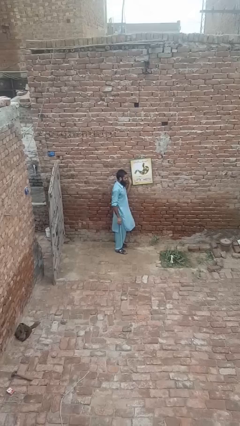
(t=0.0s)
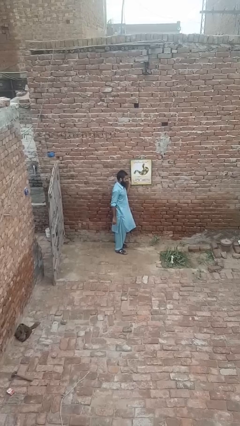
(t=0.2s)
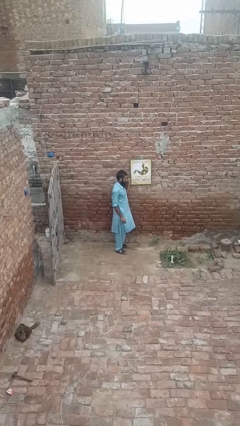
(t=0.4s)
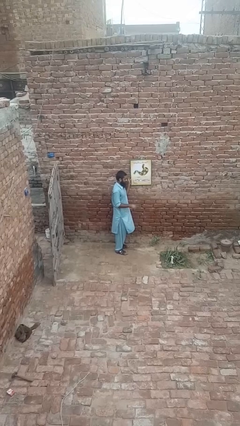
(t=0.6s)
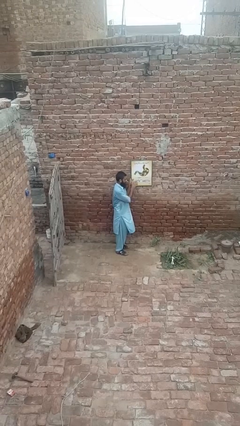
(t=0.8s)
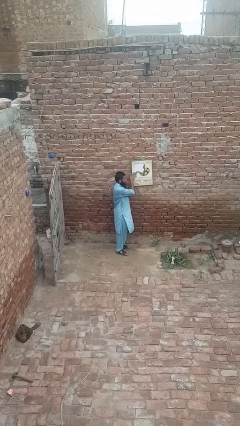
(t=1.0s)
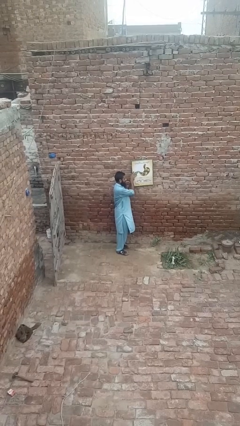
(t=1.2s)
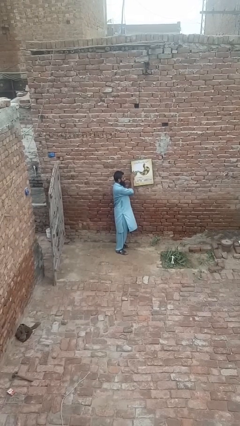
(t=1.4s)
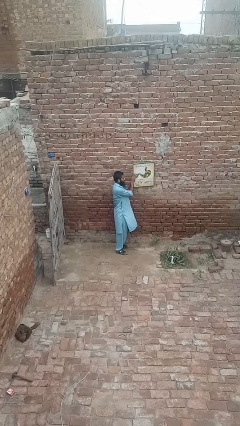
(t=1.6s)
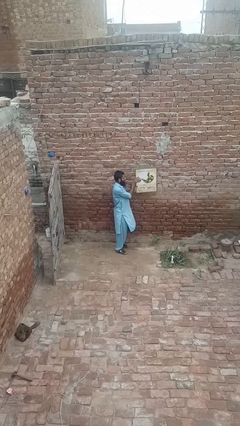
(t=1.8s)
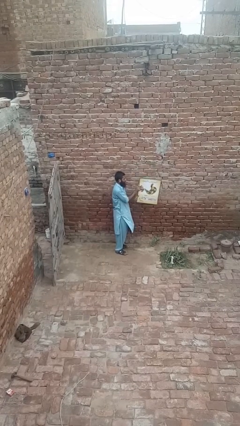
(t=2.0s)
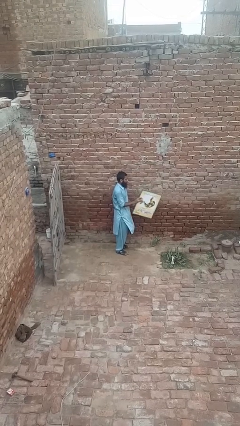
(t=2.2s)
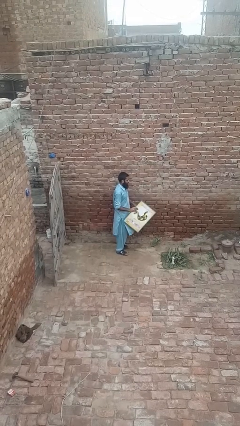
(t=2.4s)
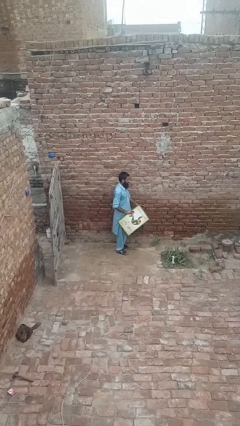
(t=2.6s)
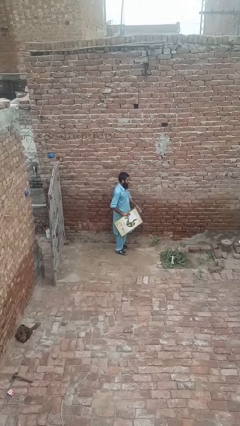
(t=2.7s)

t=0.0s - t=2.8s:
person takes down picture frame

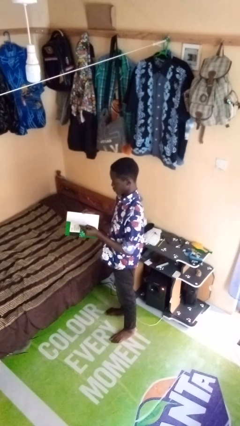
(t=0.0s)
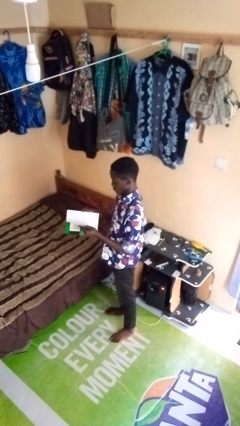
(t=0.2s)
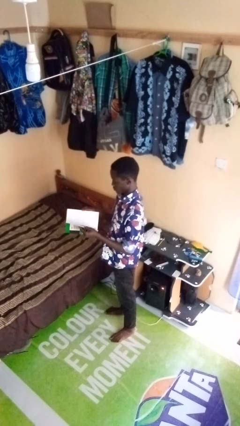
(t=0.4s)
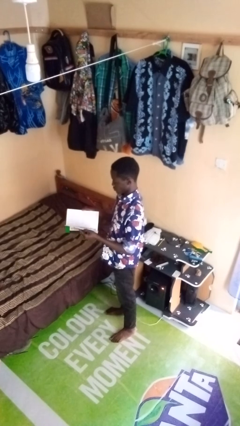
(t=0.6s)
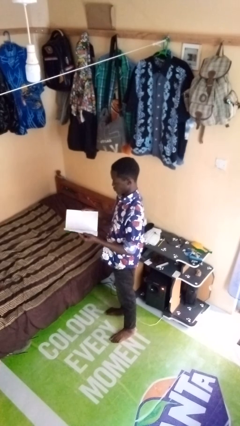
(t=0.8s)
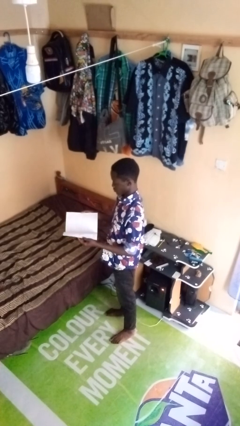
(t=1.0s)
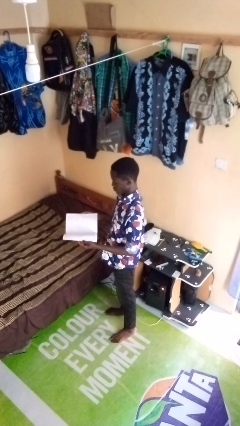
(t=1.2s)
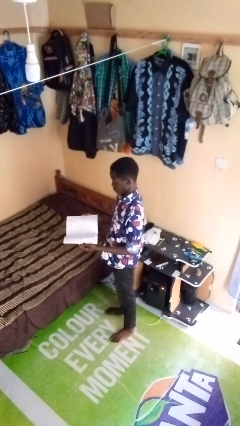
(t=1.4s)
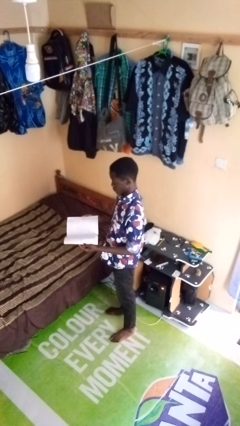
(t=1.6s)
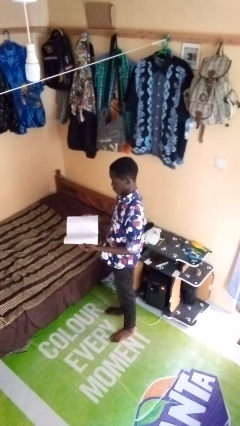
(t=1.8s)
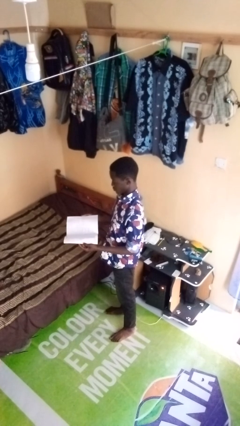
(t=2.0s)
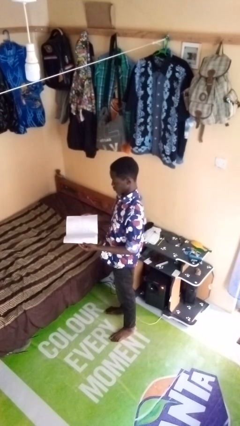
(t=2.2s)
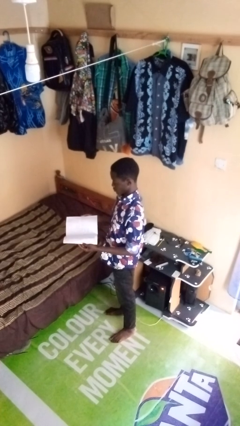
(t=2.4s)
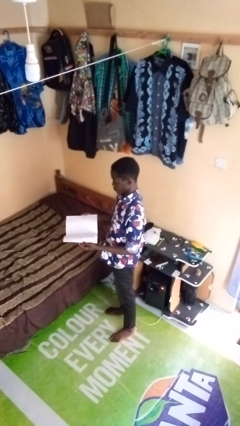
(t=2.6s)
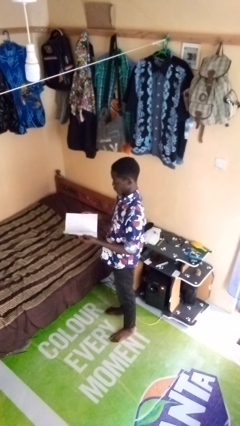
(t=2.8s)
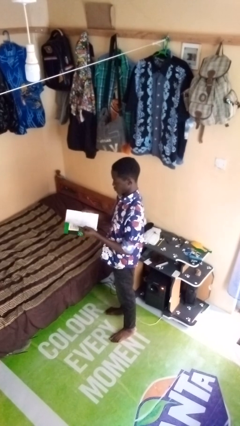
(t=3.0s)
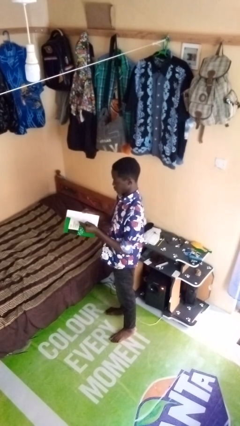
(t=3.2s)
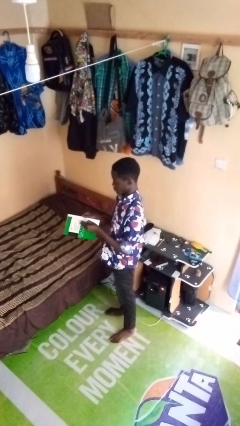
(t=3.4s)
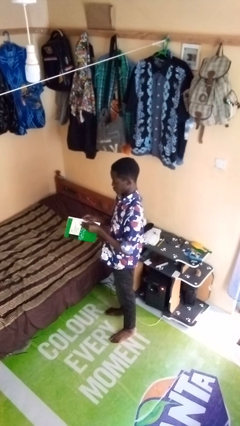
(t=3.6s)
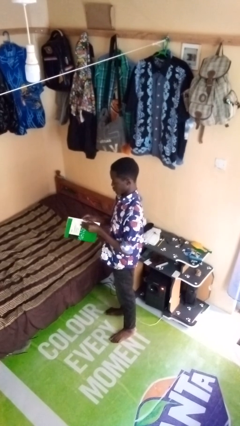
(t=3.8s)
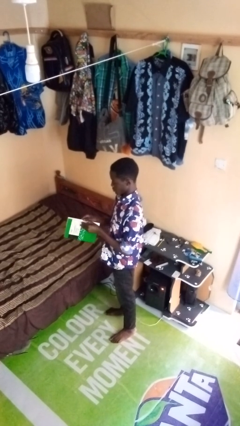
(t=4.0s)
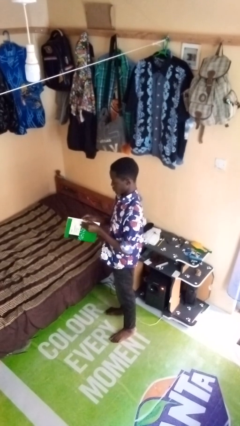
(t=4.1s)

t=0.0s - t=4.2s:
person reads magazine

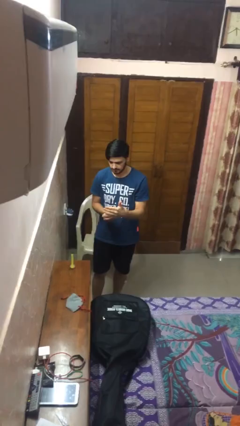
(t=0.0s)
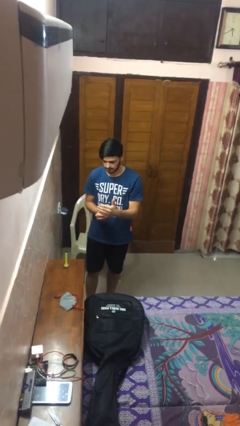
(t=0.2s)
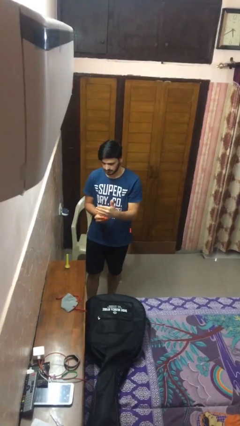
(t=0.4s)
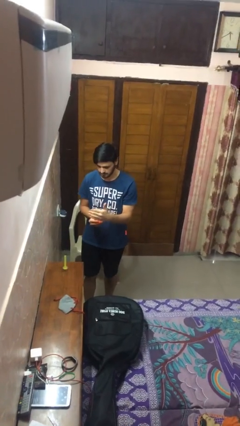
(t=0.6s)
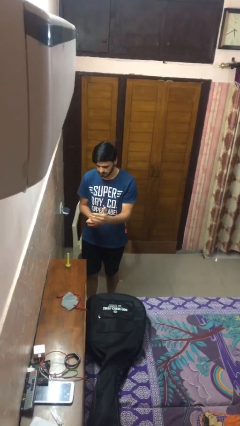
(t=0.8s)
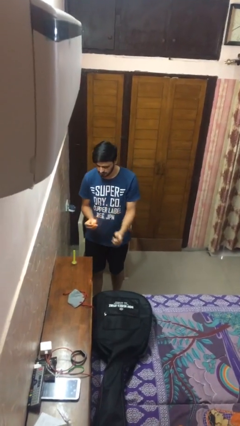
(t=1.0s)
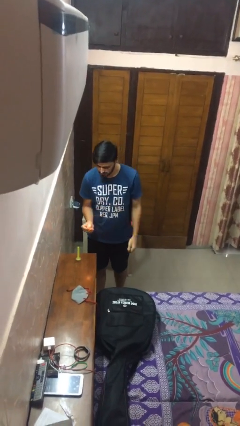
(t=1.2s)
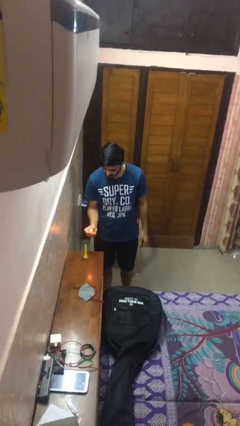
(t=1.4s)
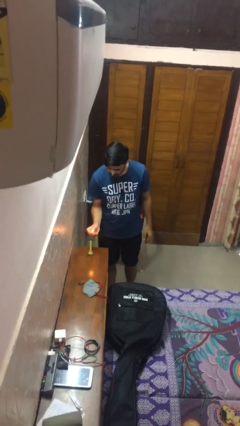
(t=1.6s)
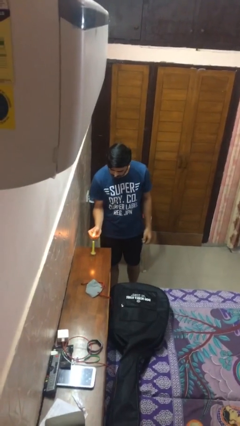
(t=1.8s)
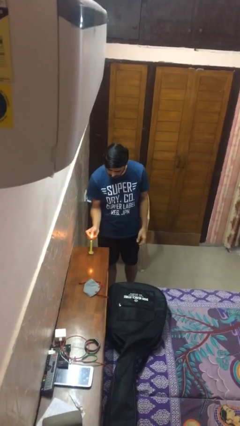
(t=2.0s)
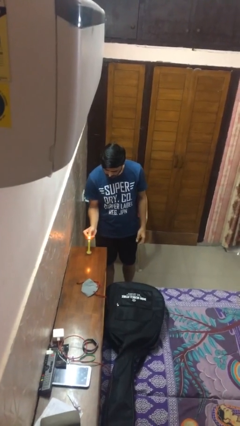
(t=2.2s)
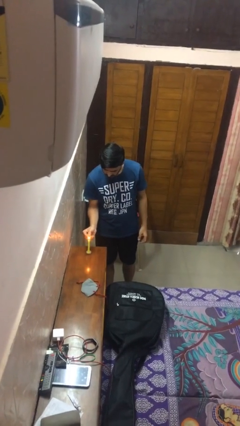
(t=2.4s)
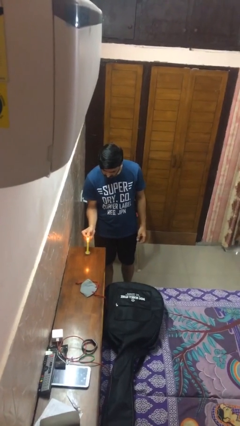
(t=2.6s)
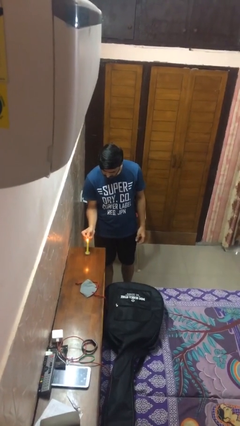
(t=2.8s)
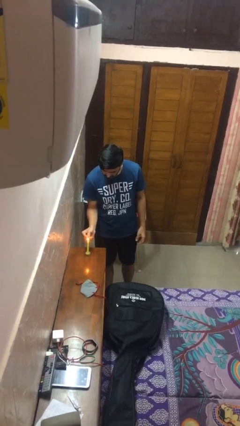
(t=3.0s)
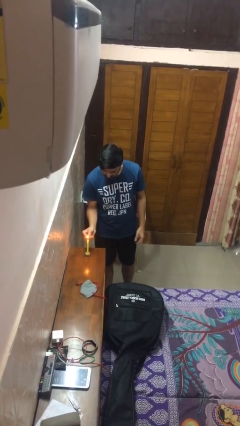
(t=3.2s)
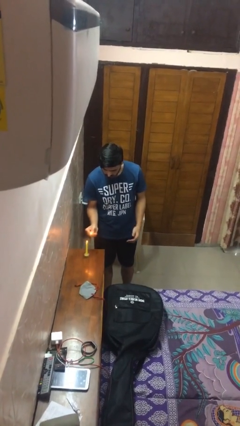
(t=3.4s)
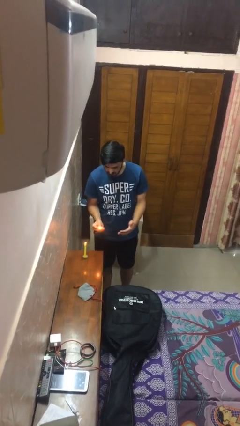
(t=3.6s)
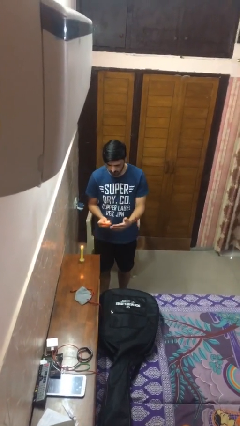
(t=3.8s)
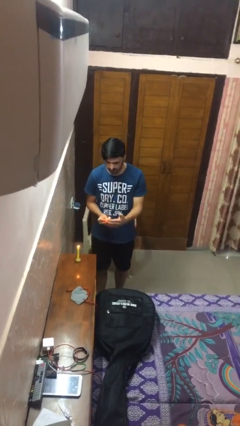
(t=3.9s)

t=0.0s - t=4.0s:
person lights candle

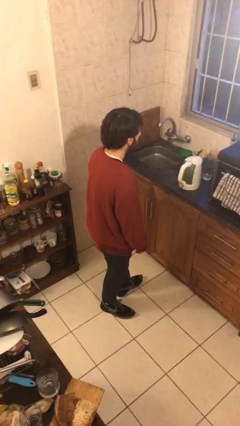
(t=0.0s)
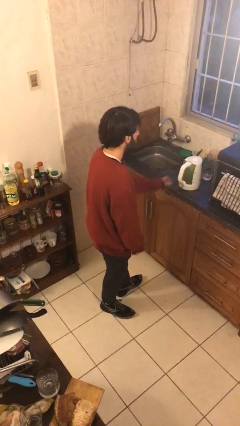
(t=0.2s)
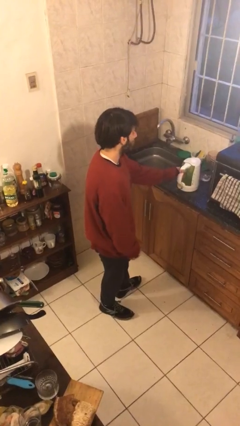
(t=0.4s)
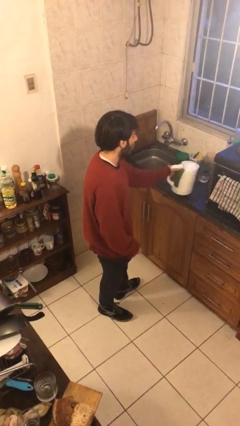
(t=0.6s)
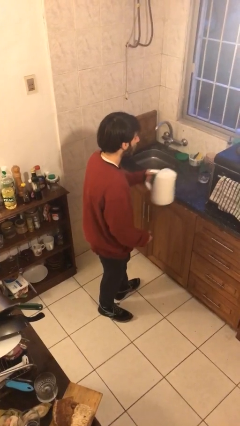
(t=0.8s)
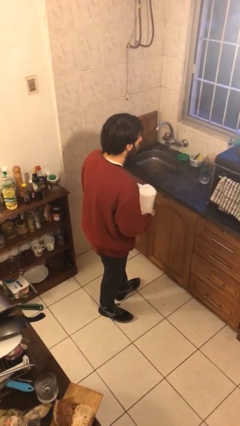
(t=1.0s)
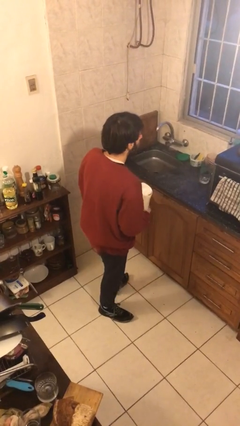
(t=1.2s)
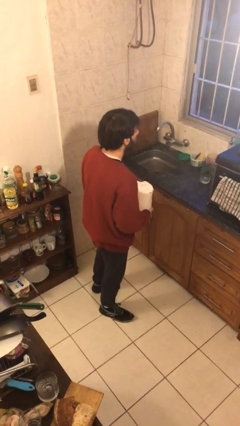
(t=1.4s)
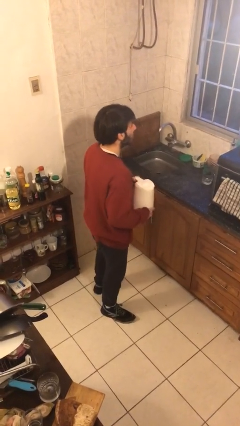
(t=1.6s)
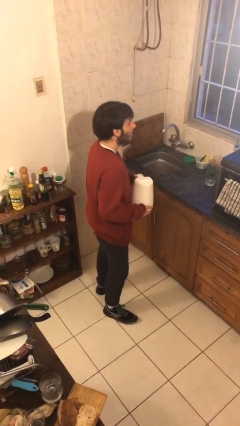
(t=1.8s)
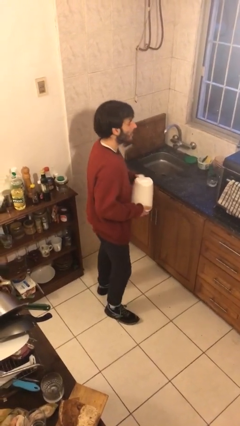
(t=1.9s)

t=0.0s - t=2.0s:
person picks up object from countertop

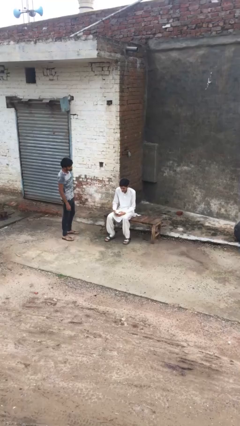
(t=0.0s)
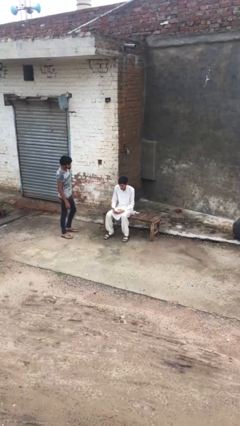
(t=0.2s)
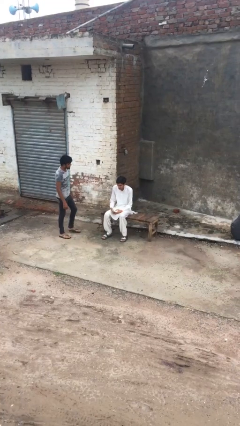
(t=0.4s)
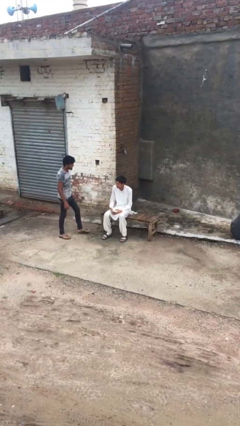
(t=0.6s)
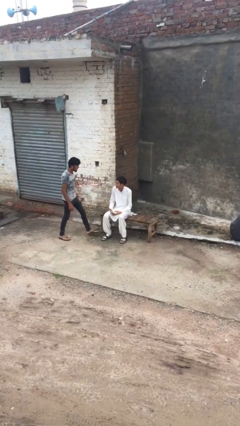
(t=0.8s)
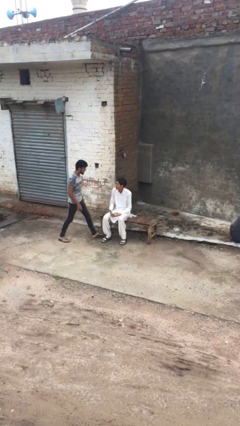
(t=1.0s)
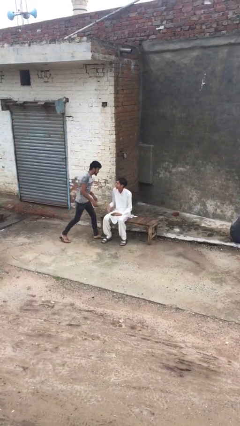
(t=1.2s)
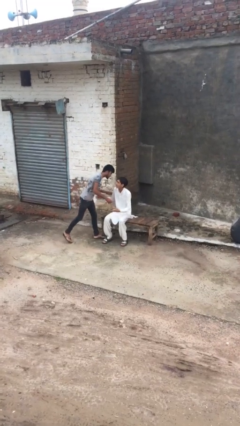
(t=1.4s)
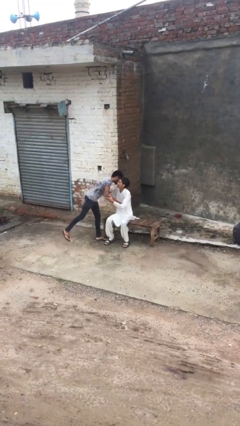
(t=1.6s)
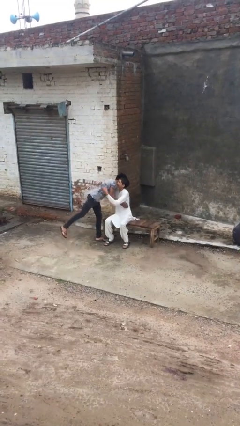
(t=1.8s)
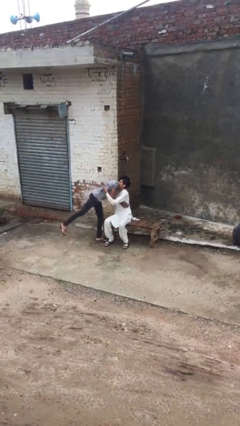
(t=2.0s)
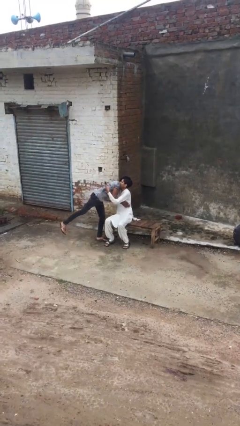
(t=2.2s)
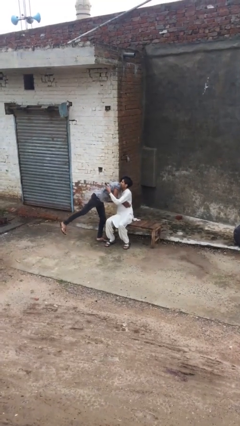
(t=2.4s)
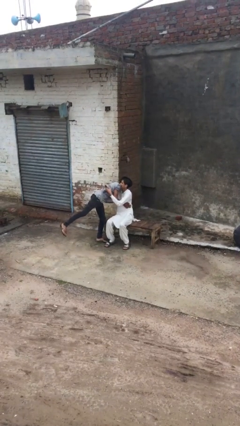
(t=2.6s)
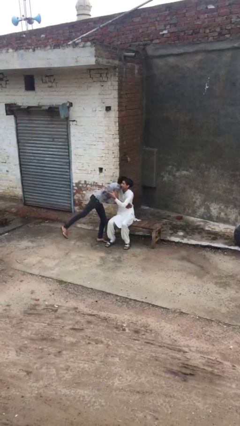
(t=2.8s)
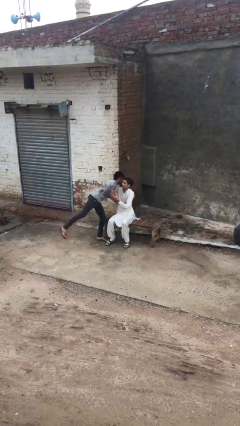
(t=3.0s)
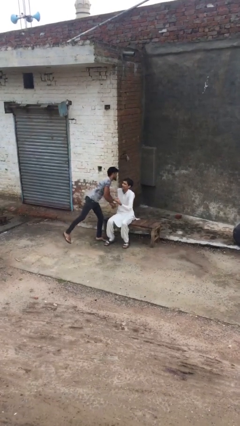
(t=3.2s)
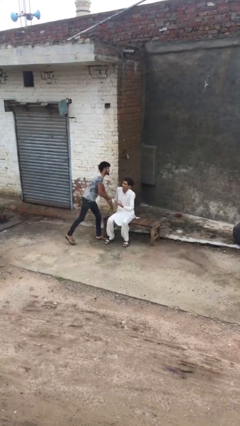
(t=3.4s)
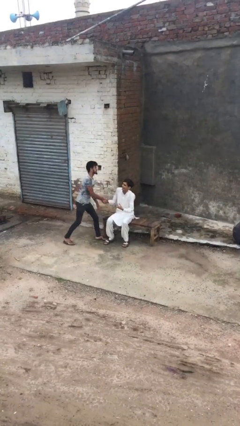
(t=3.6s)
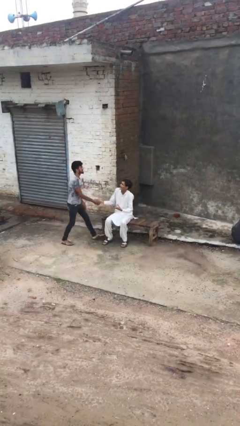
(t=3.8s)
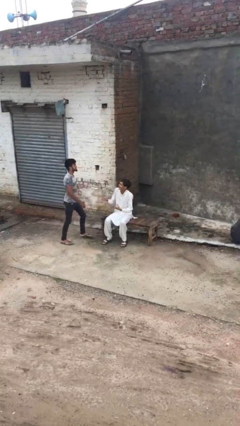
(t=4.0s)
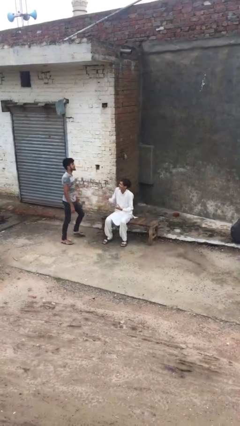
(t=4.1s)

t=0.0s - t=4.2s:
person embraces person
